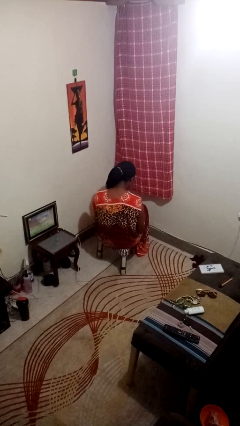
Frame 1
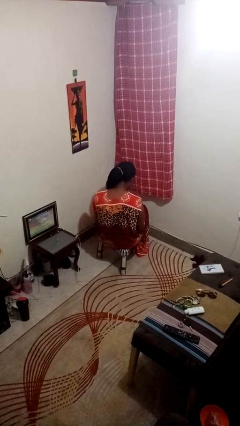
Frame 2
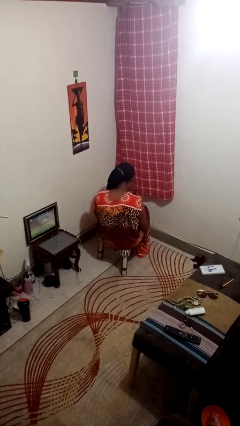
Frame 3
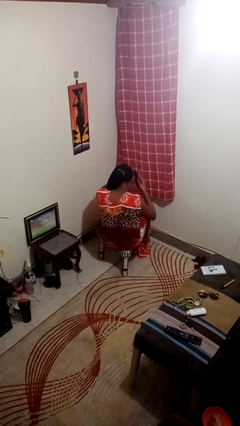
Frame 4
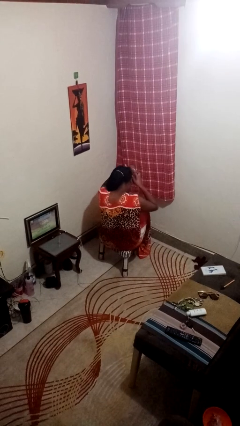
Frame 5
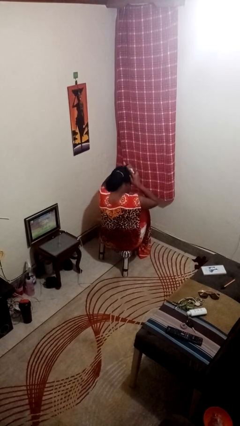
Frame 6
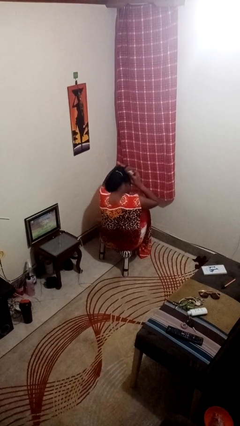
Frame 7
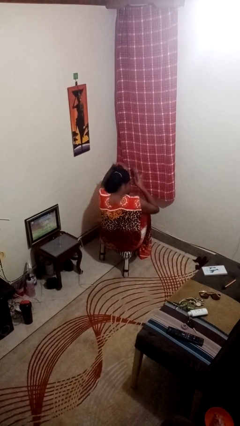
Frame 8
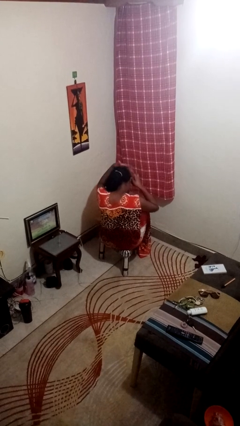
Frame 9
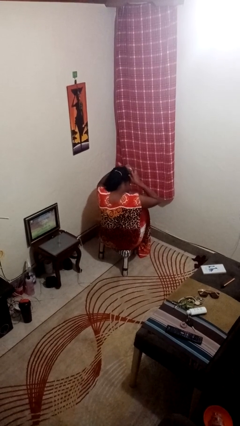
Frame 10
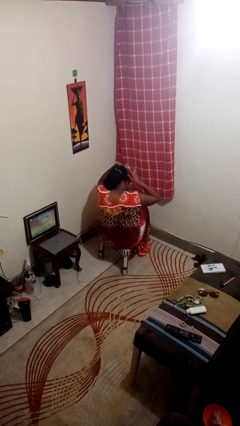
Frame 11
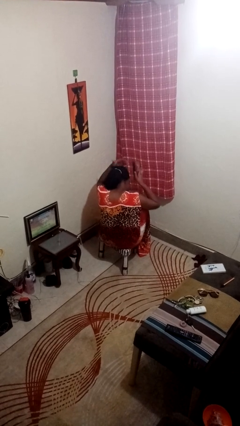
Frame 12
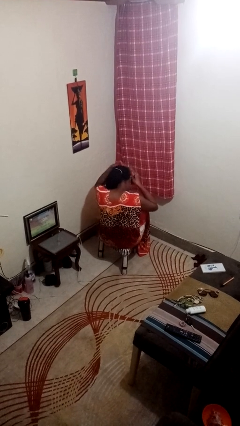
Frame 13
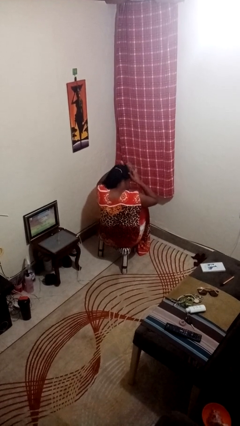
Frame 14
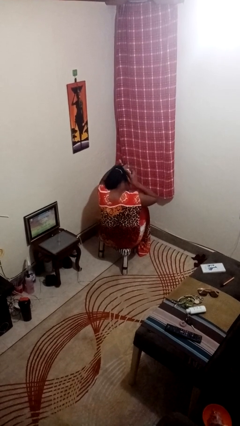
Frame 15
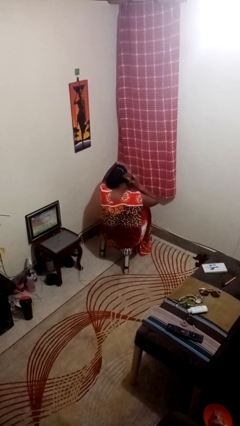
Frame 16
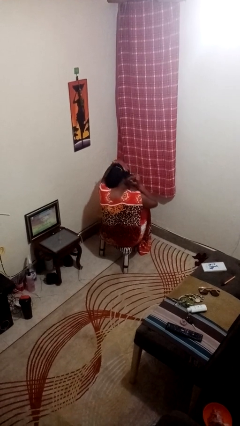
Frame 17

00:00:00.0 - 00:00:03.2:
person brushes hair

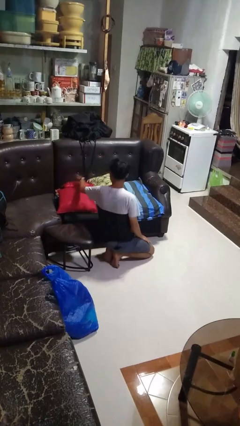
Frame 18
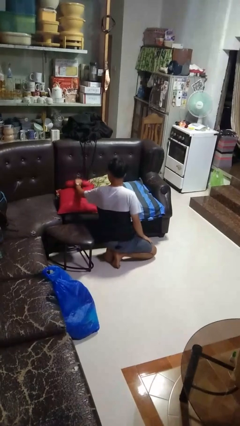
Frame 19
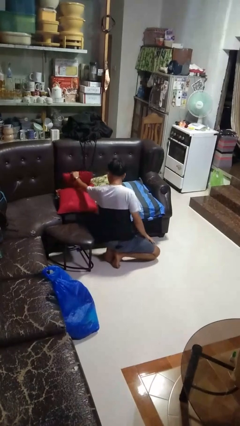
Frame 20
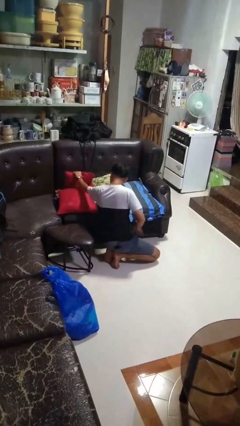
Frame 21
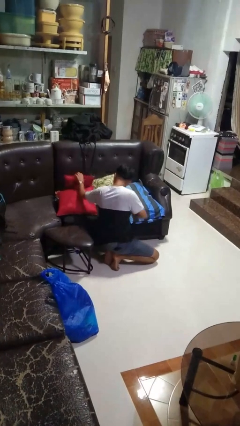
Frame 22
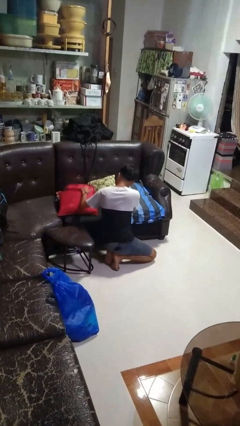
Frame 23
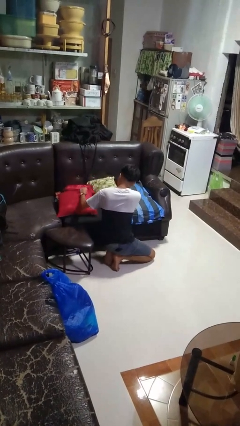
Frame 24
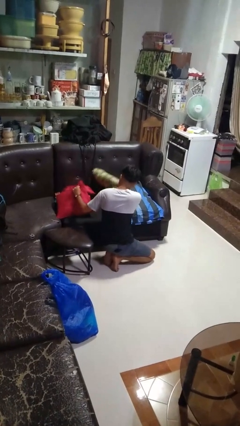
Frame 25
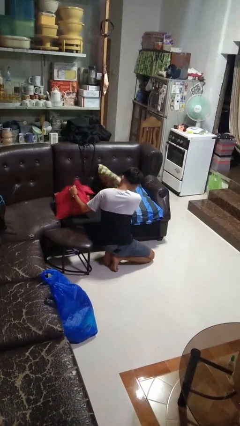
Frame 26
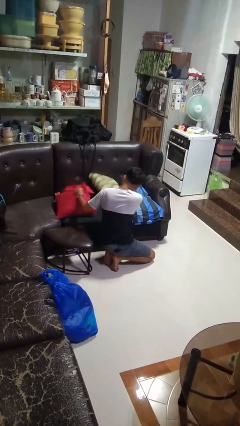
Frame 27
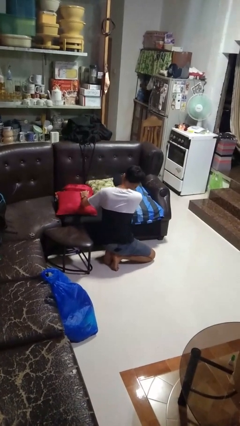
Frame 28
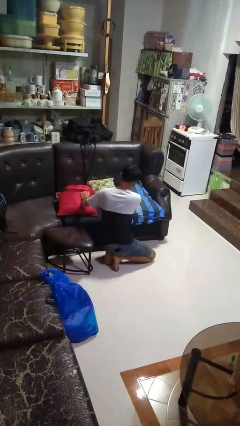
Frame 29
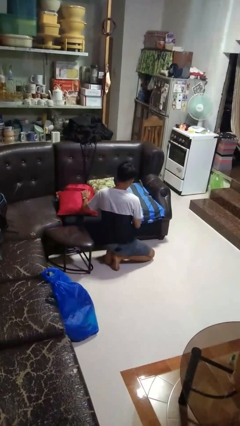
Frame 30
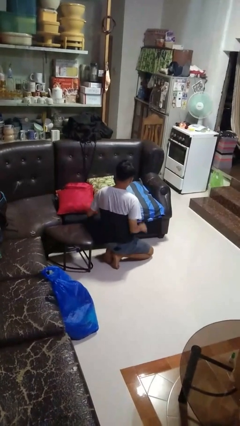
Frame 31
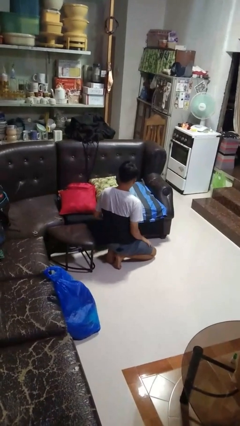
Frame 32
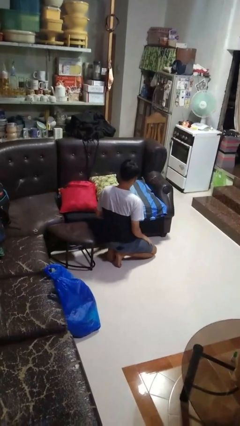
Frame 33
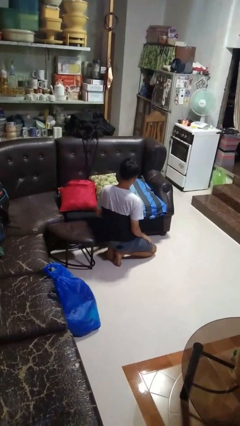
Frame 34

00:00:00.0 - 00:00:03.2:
person searches in couch

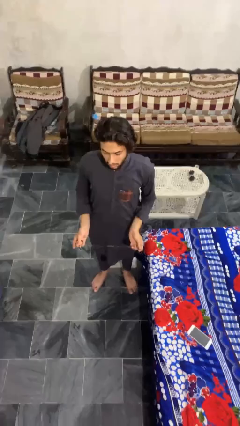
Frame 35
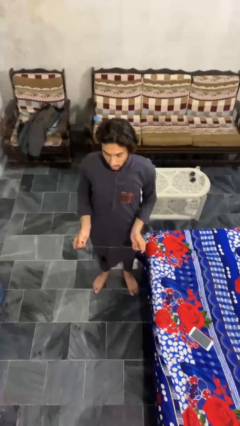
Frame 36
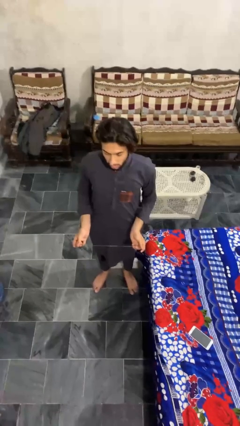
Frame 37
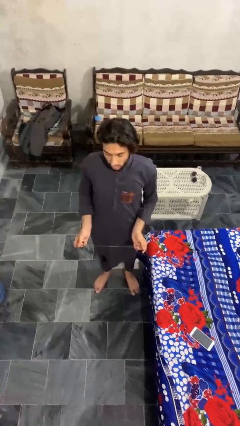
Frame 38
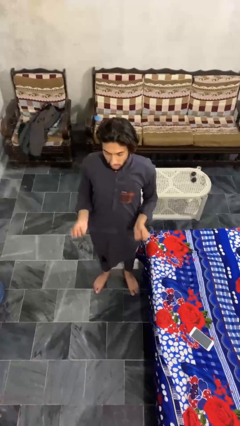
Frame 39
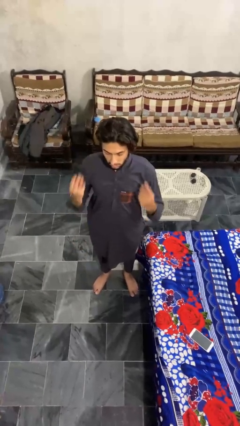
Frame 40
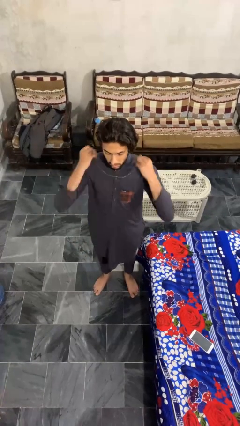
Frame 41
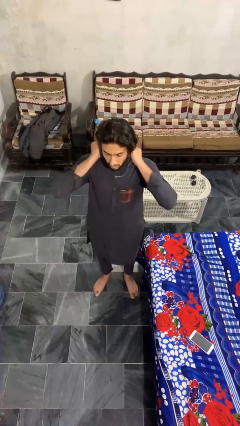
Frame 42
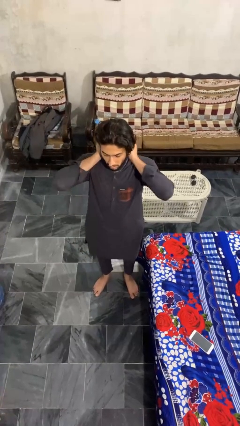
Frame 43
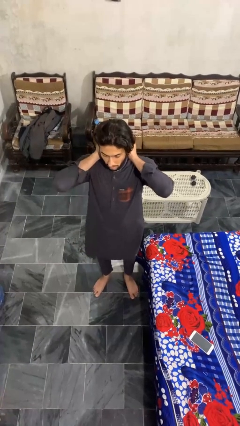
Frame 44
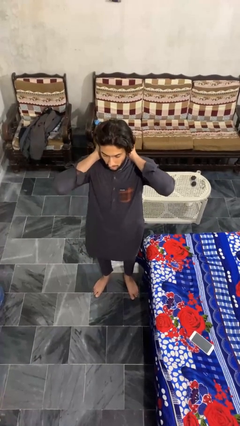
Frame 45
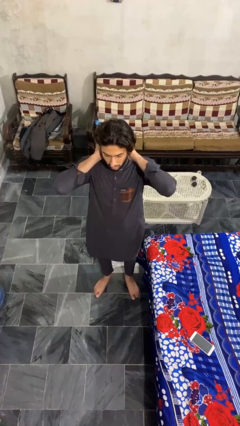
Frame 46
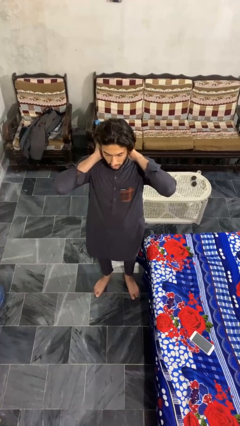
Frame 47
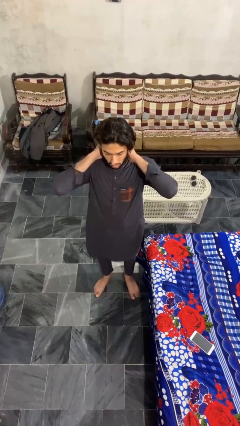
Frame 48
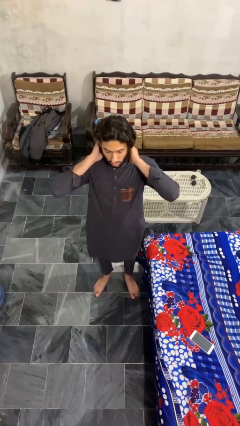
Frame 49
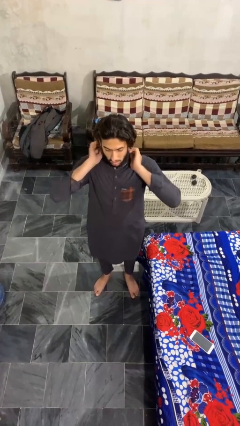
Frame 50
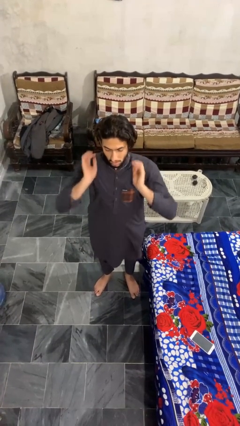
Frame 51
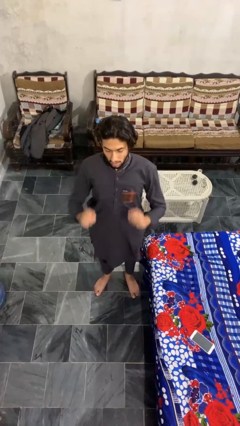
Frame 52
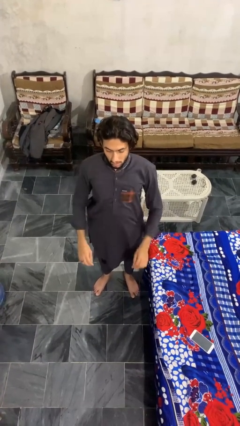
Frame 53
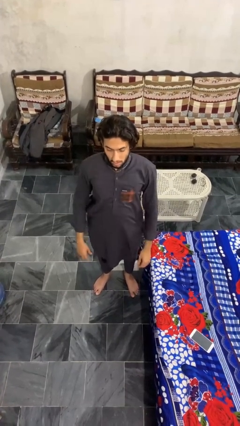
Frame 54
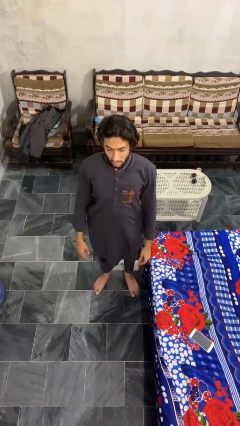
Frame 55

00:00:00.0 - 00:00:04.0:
person puts on necklace

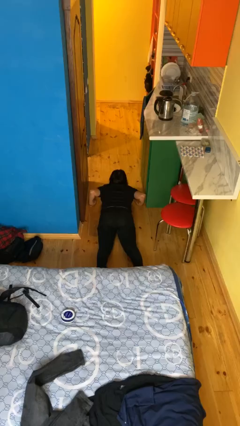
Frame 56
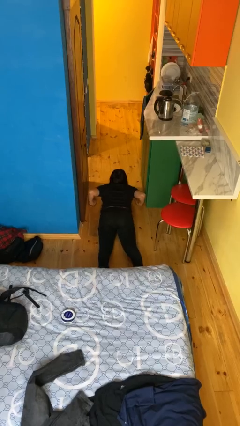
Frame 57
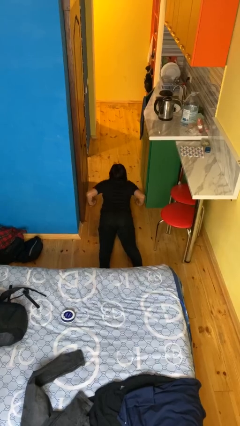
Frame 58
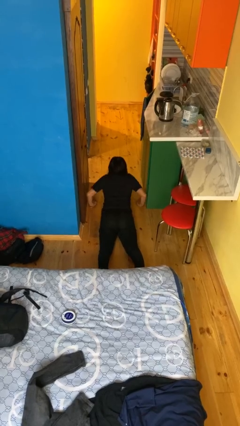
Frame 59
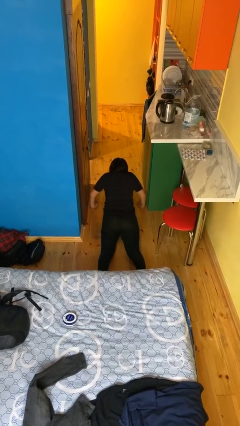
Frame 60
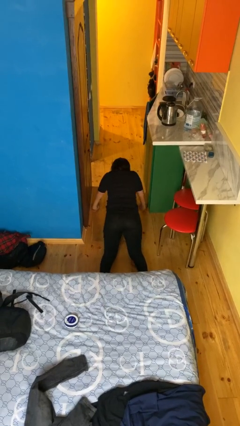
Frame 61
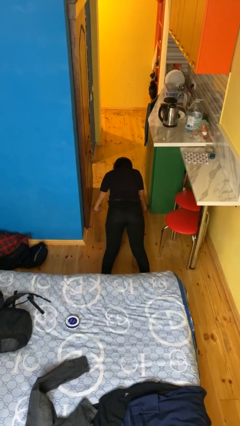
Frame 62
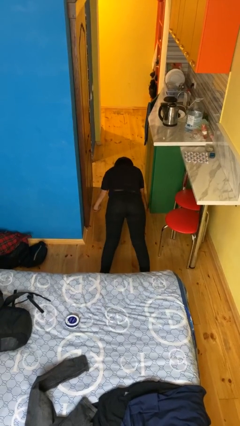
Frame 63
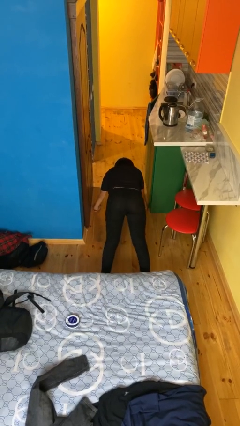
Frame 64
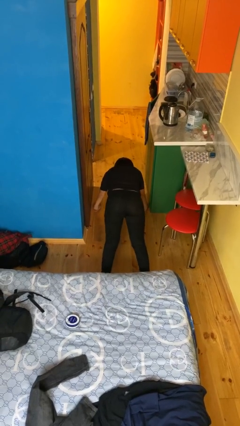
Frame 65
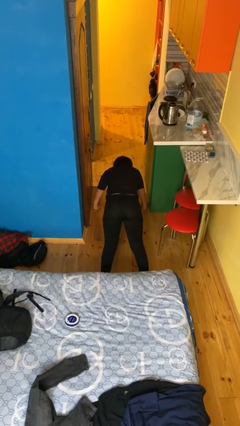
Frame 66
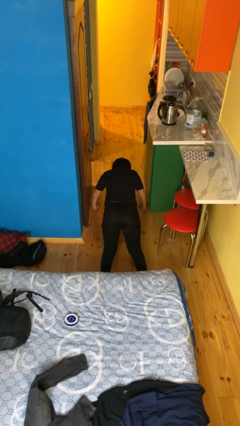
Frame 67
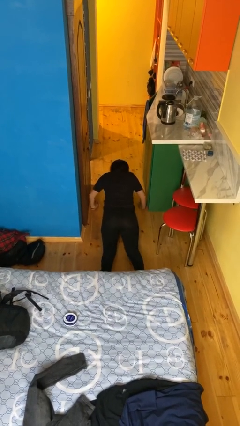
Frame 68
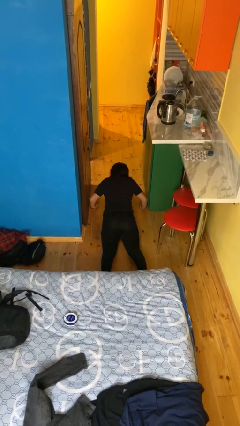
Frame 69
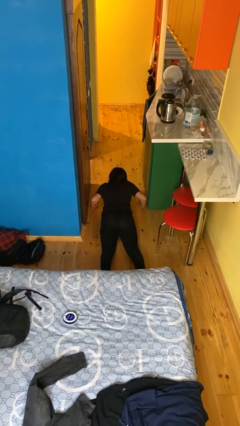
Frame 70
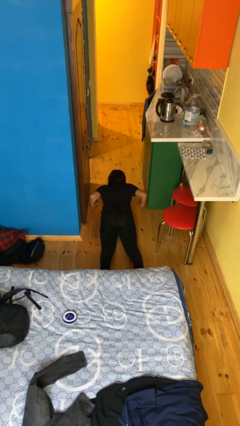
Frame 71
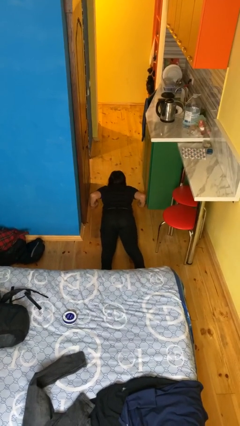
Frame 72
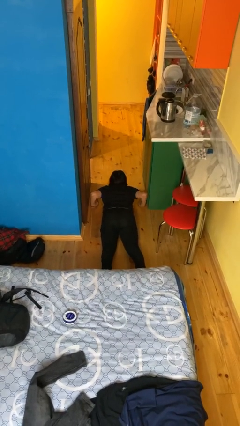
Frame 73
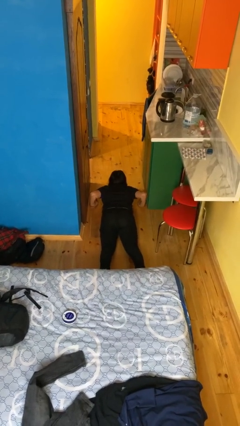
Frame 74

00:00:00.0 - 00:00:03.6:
person exercises with pushup

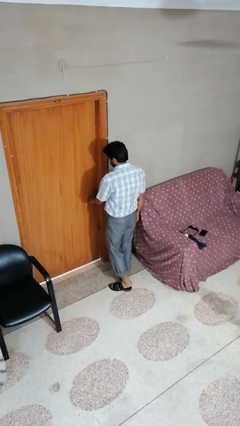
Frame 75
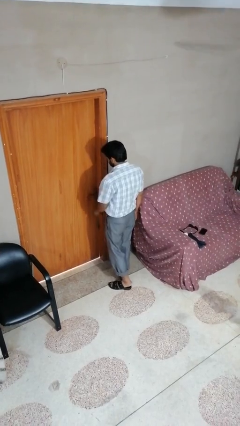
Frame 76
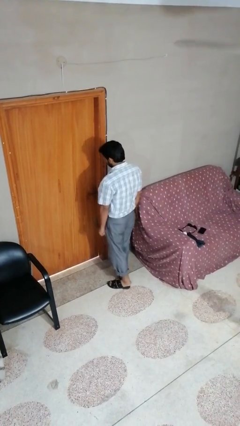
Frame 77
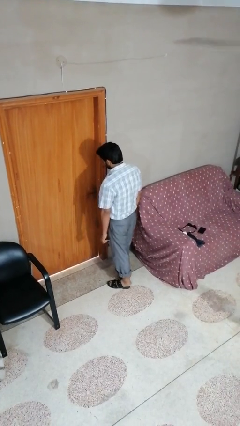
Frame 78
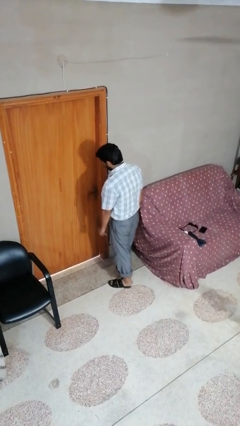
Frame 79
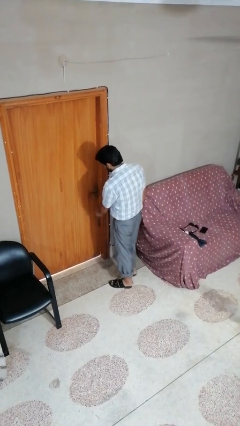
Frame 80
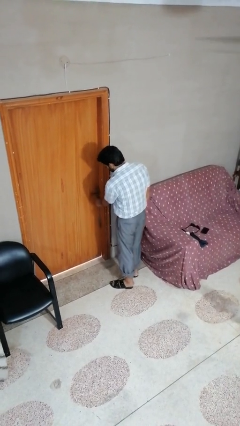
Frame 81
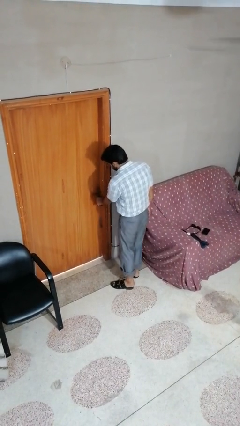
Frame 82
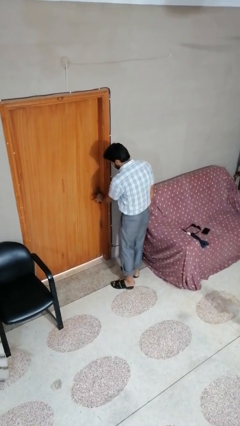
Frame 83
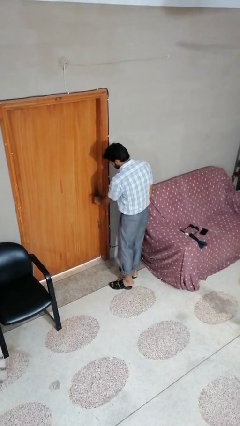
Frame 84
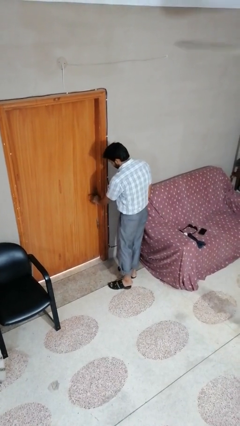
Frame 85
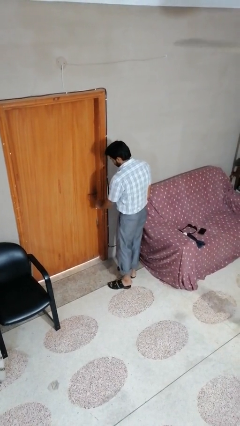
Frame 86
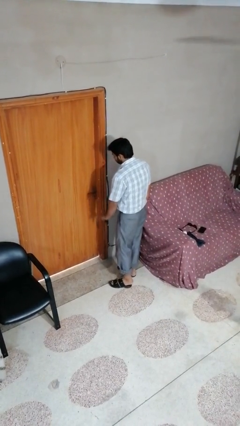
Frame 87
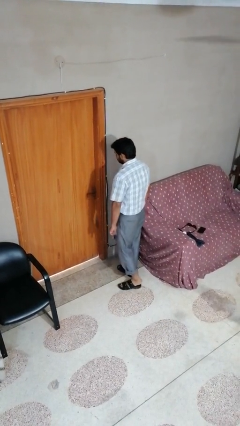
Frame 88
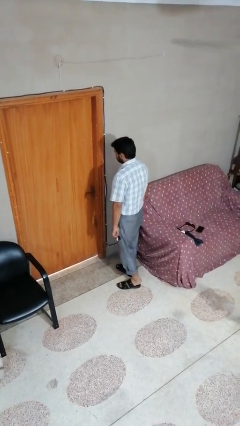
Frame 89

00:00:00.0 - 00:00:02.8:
person locks door with keys

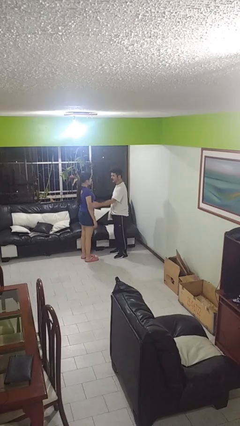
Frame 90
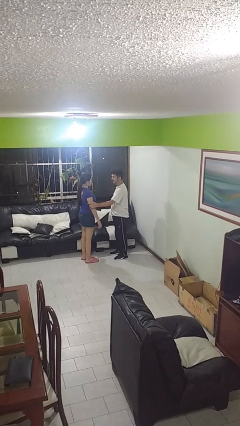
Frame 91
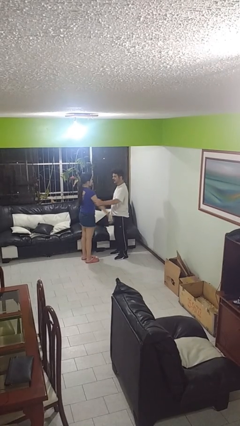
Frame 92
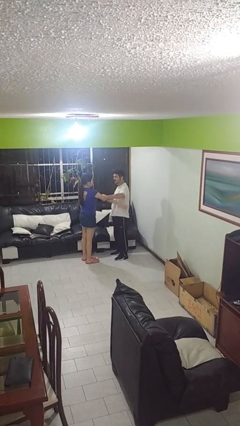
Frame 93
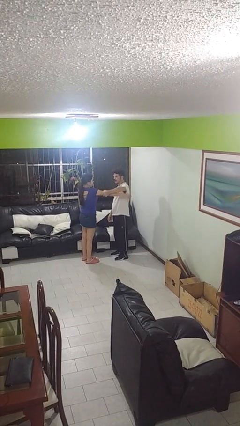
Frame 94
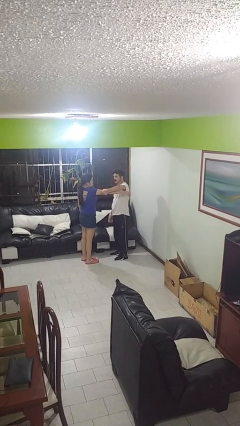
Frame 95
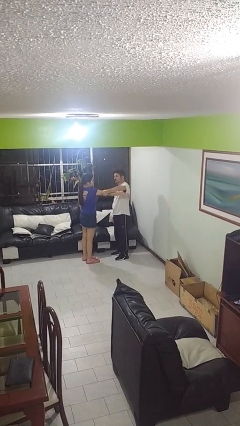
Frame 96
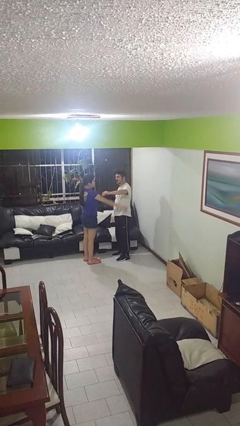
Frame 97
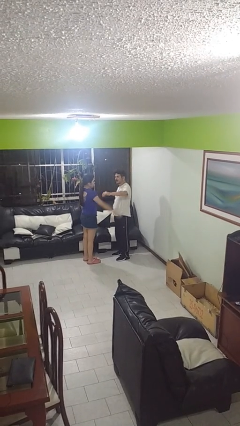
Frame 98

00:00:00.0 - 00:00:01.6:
person grabs person by bicep
